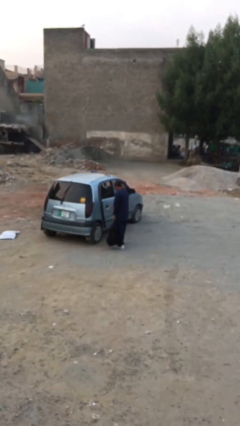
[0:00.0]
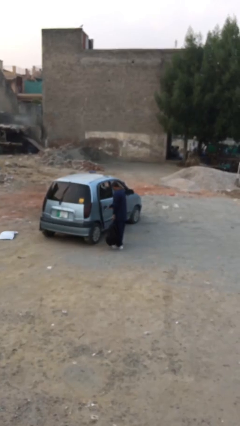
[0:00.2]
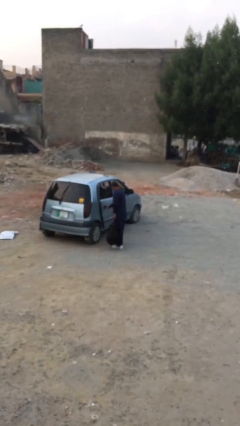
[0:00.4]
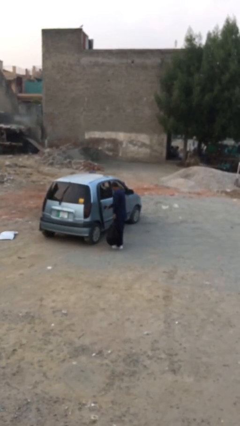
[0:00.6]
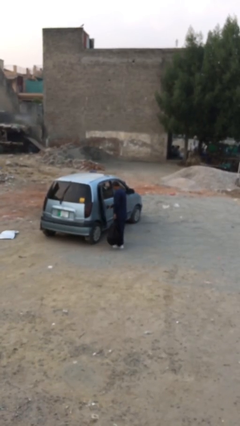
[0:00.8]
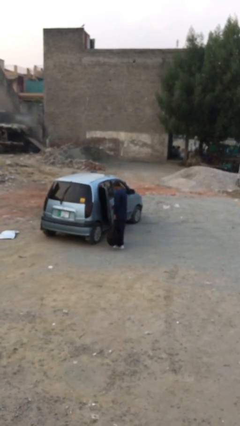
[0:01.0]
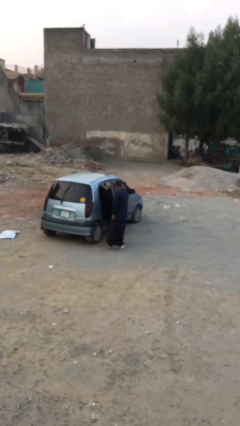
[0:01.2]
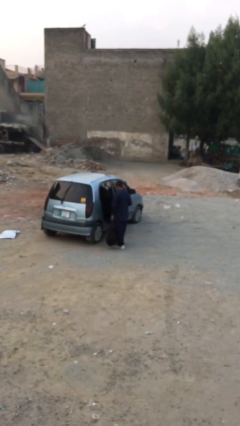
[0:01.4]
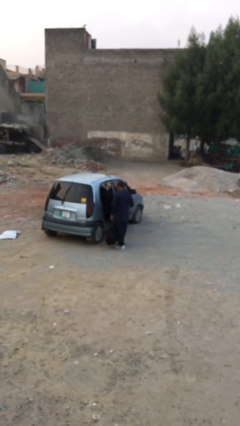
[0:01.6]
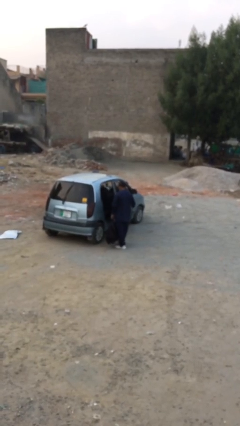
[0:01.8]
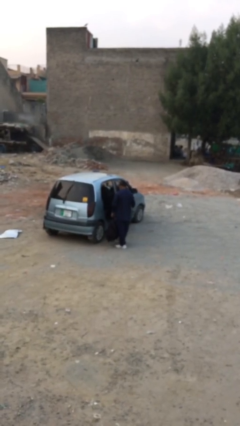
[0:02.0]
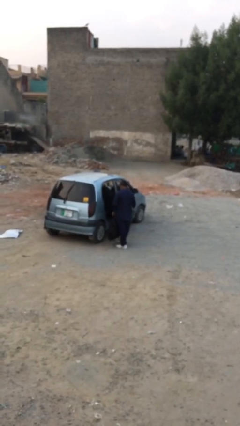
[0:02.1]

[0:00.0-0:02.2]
person opens car door

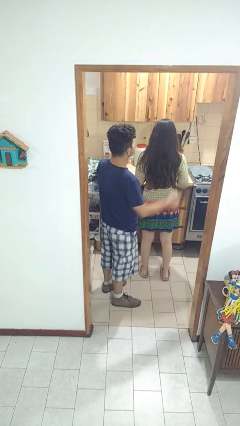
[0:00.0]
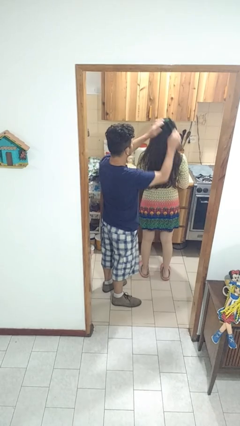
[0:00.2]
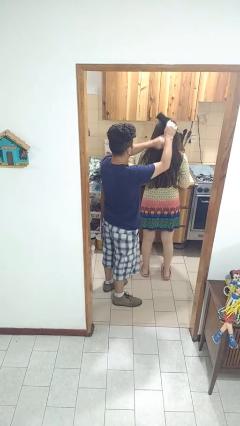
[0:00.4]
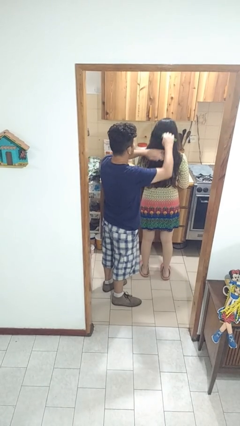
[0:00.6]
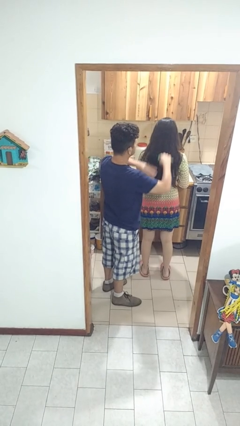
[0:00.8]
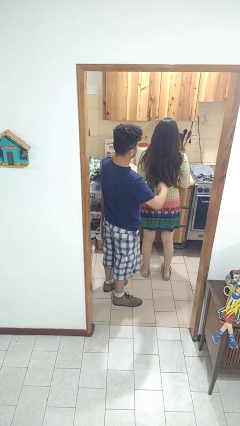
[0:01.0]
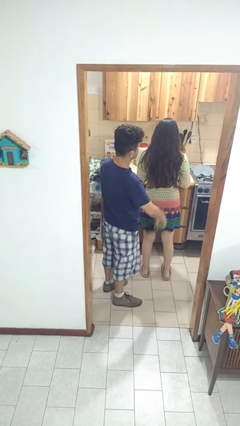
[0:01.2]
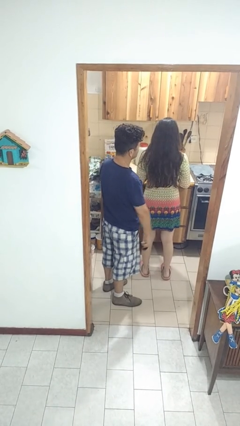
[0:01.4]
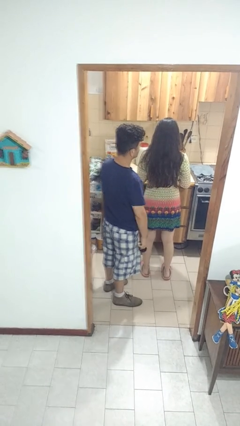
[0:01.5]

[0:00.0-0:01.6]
person brushes hair of person

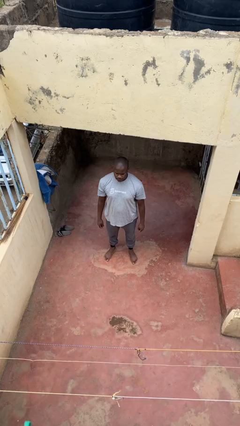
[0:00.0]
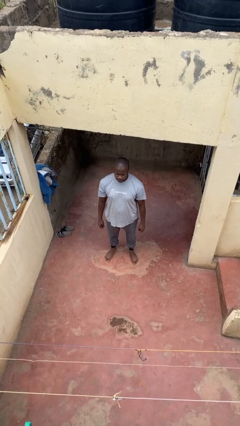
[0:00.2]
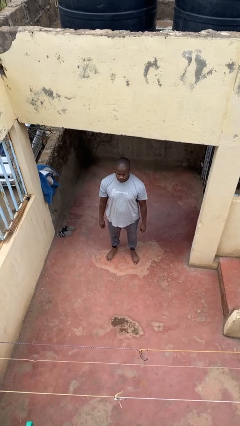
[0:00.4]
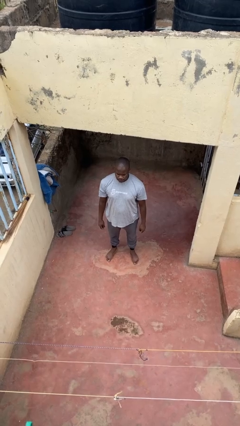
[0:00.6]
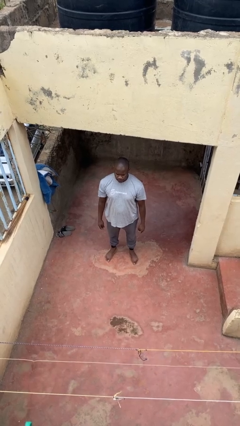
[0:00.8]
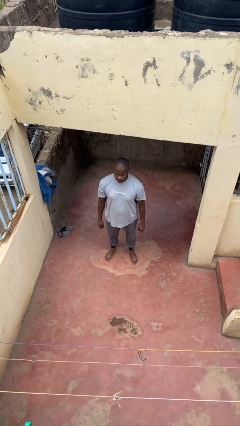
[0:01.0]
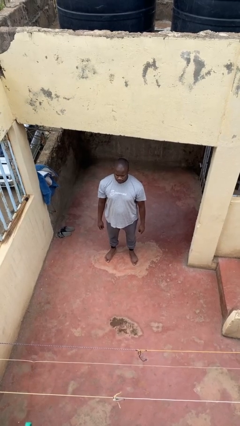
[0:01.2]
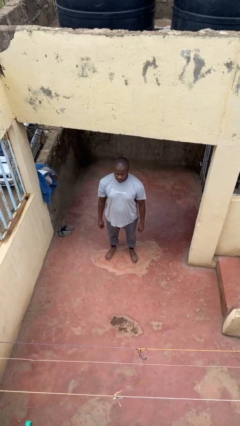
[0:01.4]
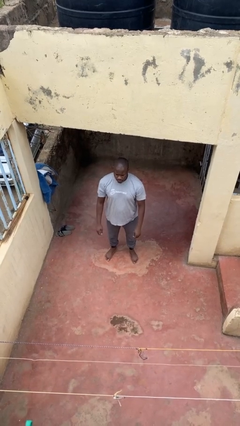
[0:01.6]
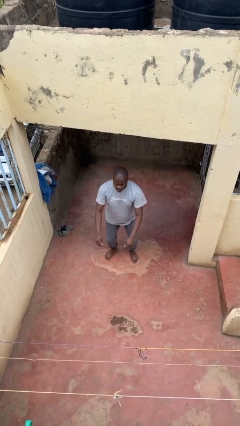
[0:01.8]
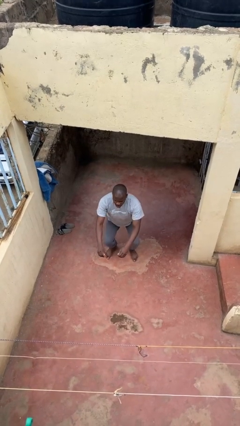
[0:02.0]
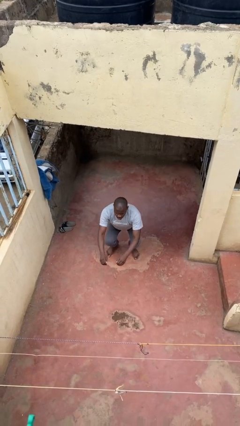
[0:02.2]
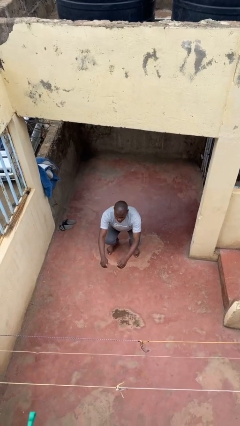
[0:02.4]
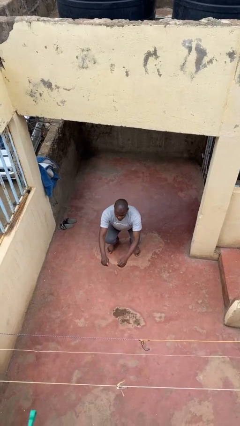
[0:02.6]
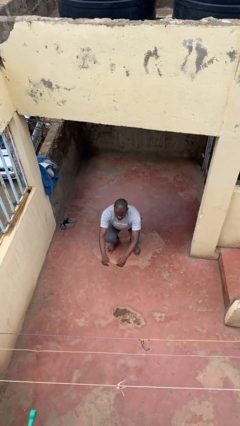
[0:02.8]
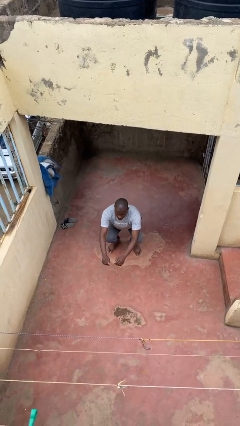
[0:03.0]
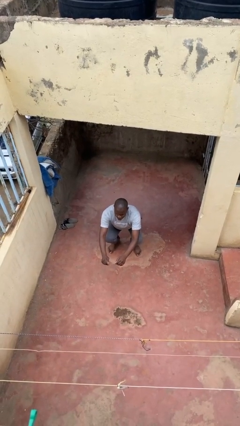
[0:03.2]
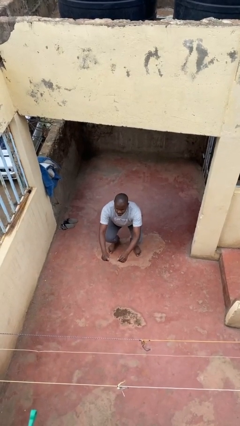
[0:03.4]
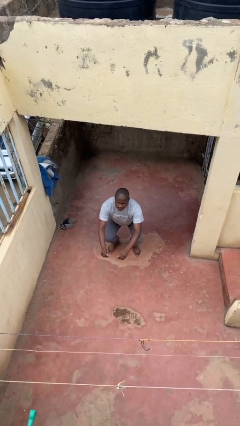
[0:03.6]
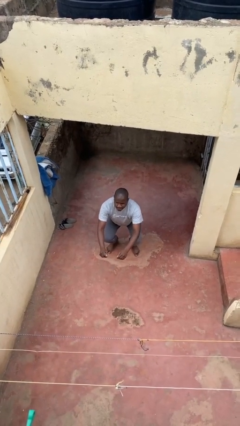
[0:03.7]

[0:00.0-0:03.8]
person squats

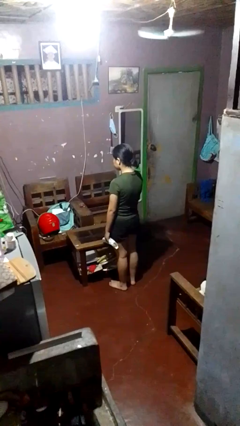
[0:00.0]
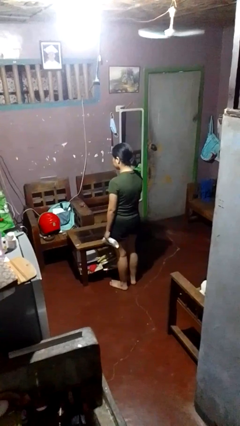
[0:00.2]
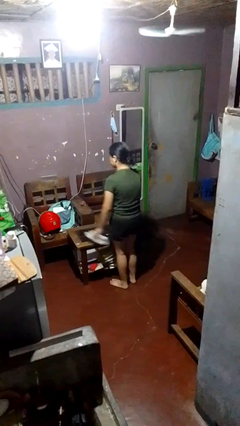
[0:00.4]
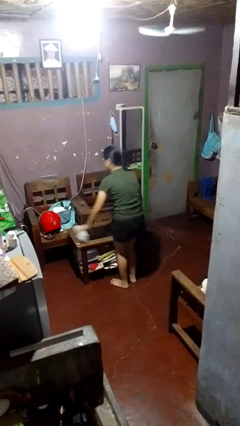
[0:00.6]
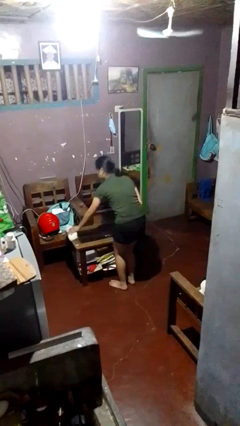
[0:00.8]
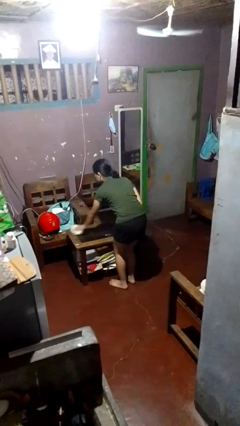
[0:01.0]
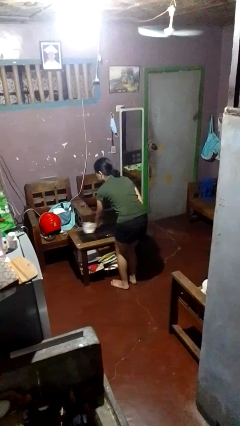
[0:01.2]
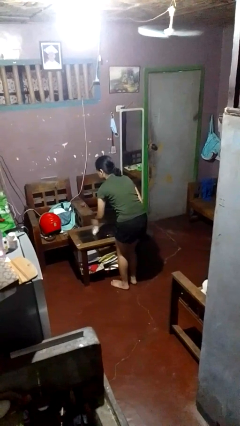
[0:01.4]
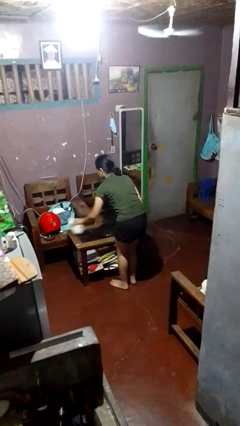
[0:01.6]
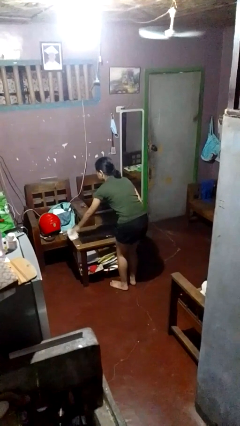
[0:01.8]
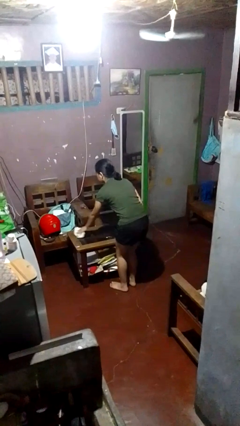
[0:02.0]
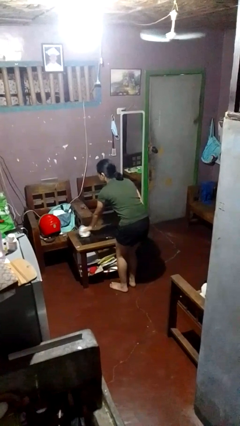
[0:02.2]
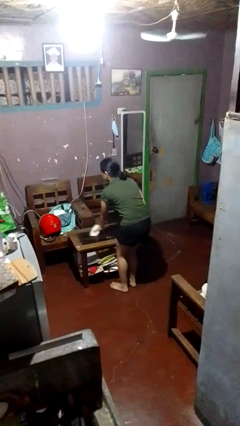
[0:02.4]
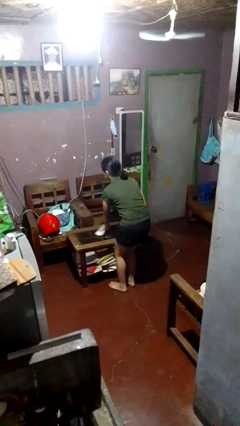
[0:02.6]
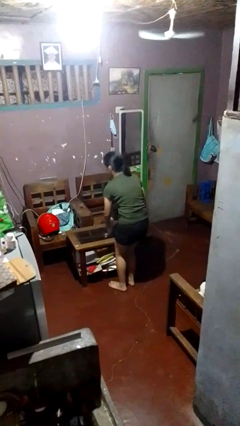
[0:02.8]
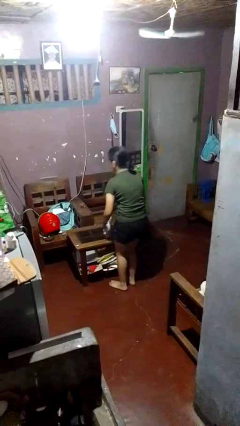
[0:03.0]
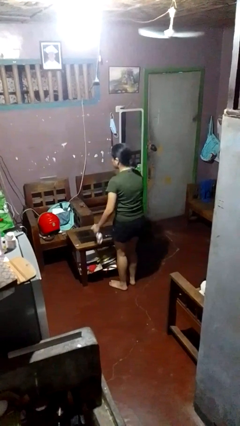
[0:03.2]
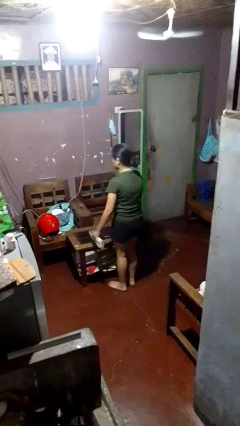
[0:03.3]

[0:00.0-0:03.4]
person cleans table with rag

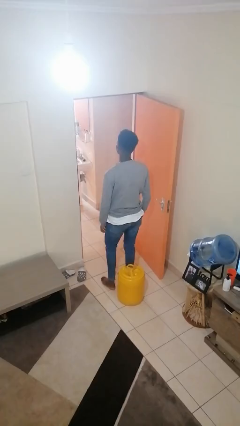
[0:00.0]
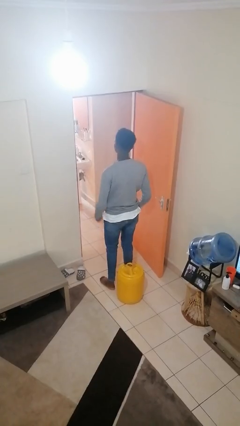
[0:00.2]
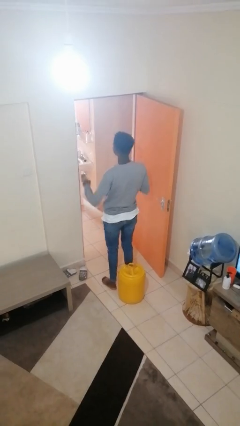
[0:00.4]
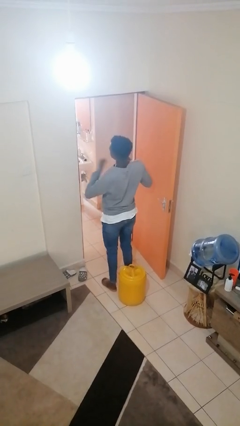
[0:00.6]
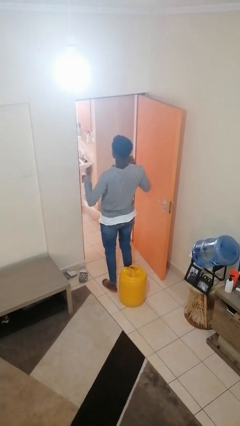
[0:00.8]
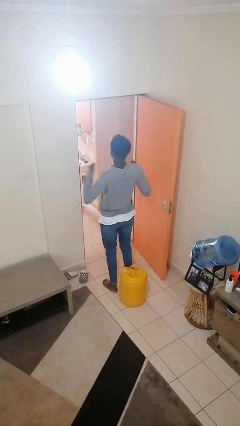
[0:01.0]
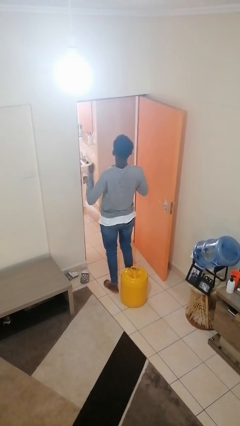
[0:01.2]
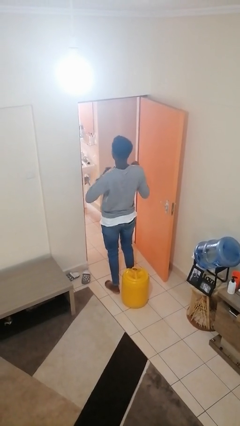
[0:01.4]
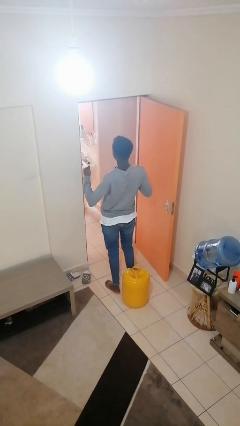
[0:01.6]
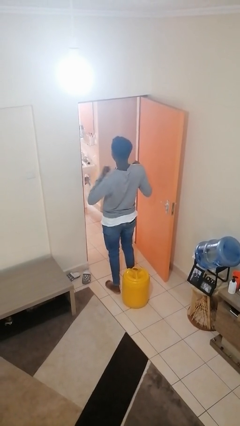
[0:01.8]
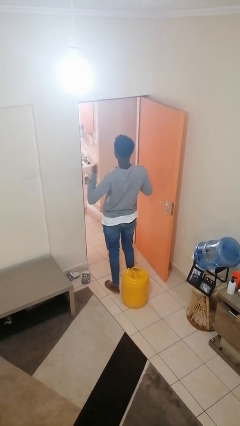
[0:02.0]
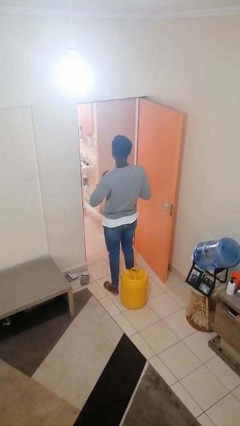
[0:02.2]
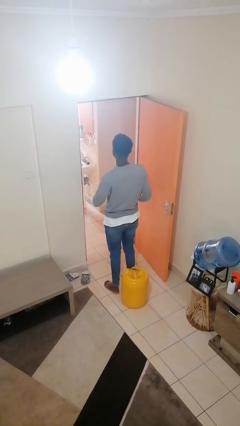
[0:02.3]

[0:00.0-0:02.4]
person drums on chest

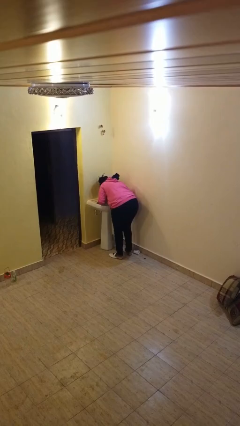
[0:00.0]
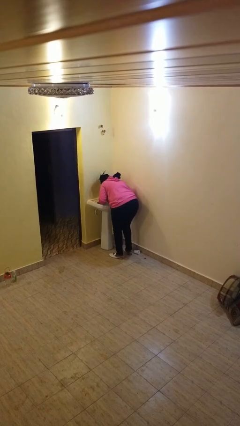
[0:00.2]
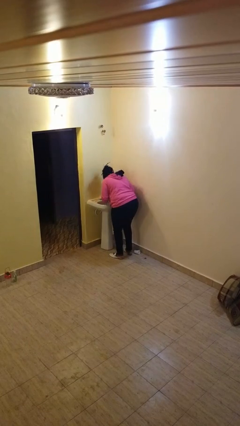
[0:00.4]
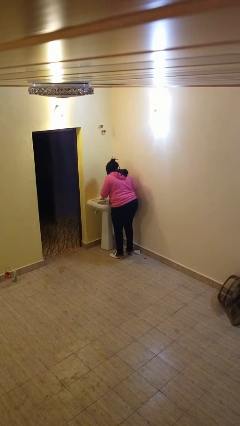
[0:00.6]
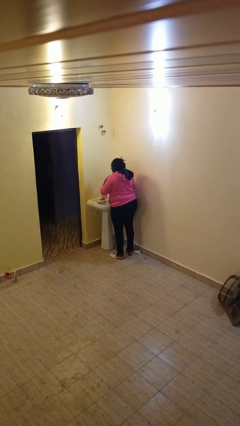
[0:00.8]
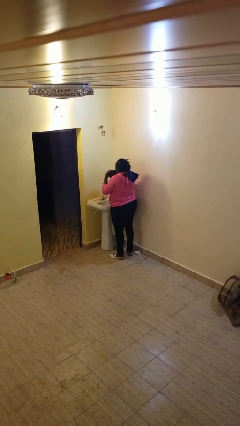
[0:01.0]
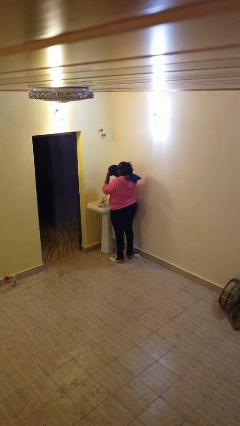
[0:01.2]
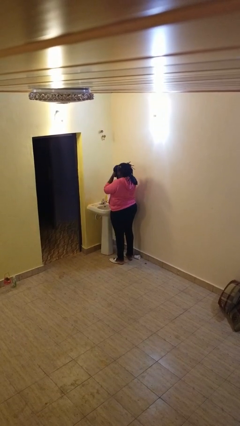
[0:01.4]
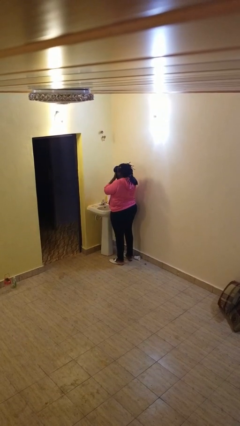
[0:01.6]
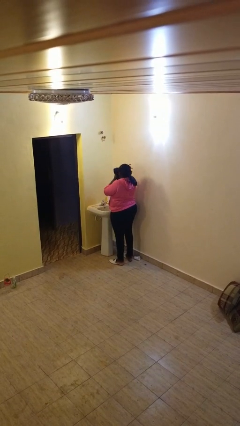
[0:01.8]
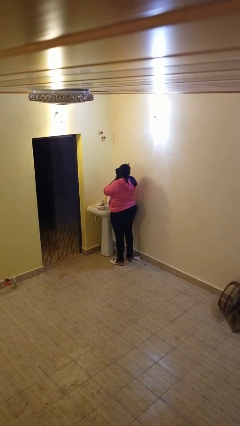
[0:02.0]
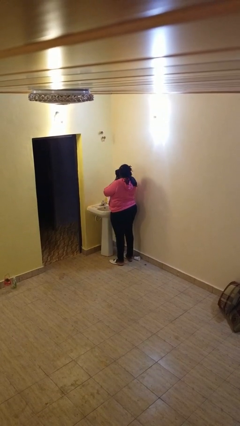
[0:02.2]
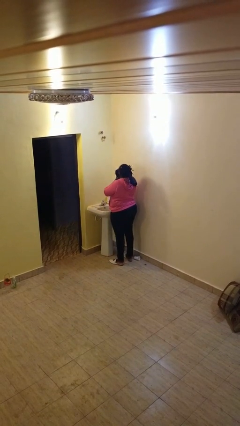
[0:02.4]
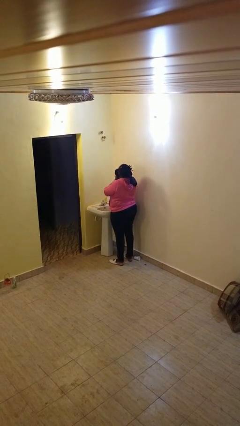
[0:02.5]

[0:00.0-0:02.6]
person dries face with towel

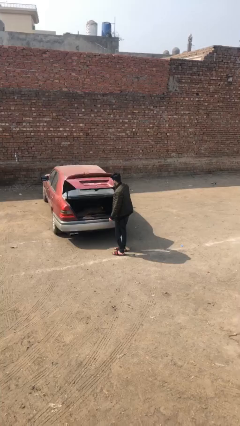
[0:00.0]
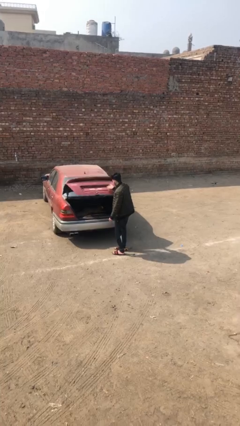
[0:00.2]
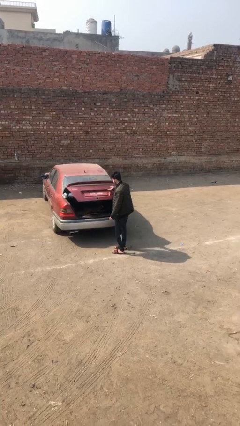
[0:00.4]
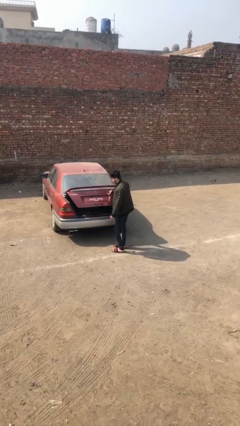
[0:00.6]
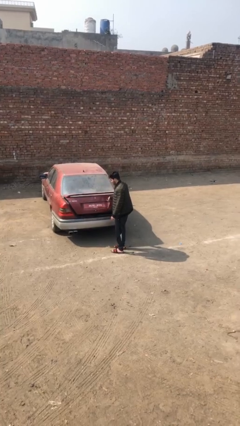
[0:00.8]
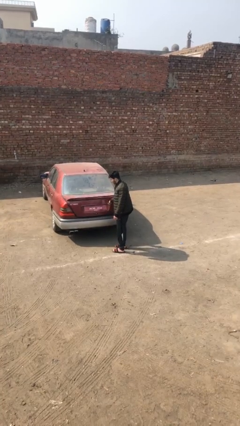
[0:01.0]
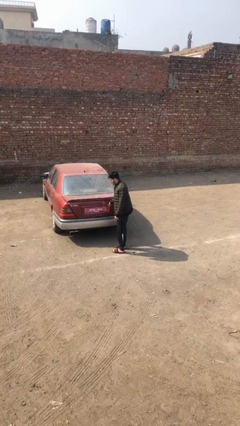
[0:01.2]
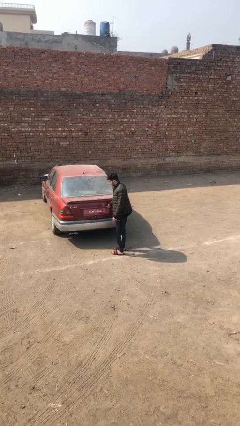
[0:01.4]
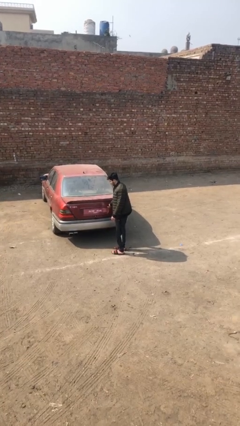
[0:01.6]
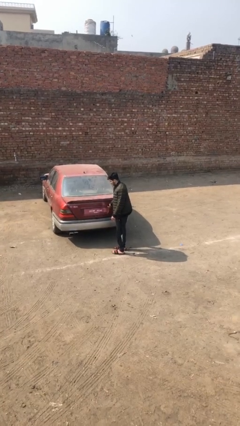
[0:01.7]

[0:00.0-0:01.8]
person closes car trunk
